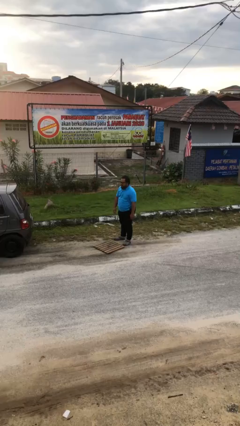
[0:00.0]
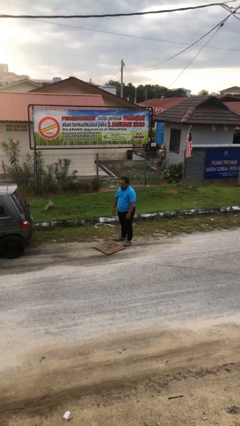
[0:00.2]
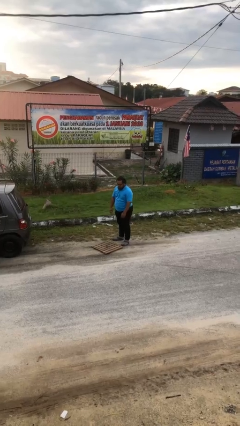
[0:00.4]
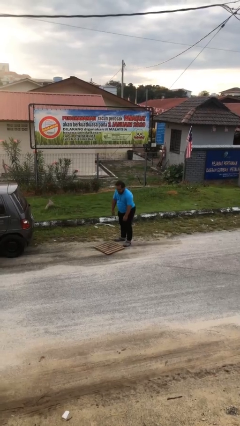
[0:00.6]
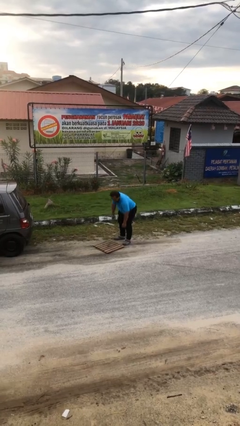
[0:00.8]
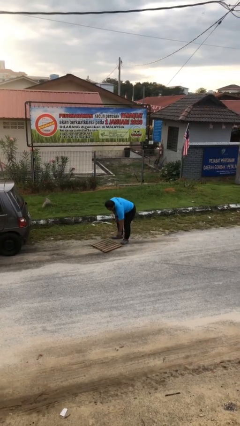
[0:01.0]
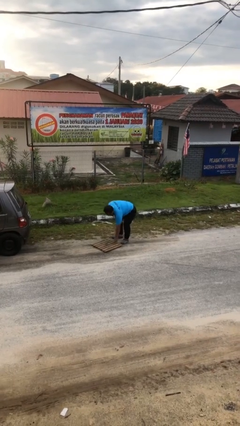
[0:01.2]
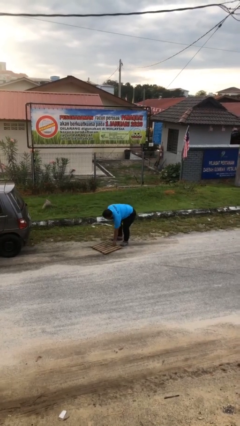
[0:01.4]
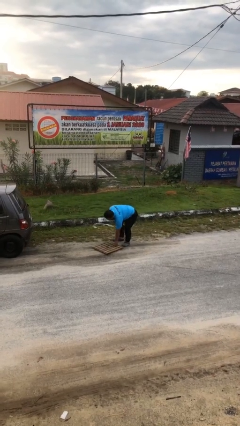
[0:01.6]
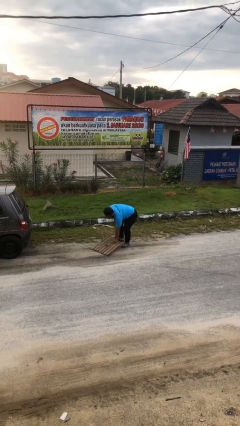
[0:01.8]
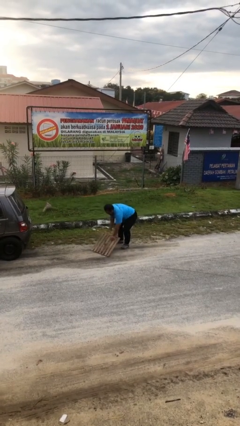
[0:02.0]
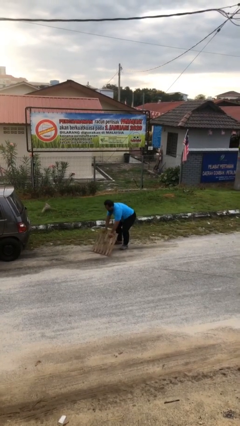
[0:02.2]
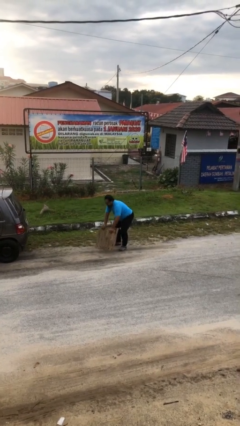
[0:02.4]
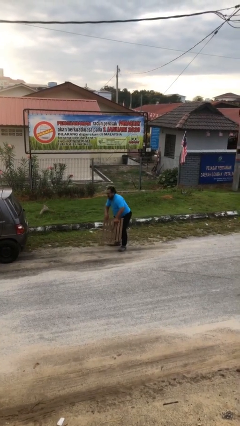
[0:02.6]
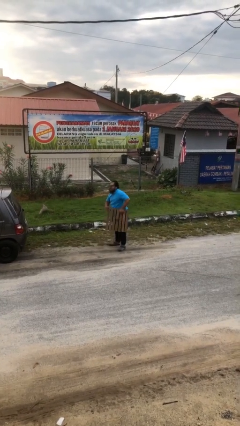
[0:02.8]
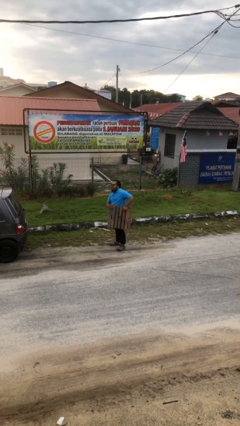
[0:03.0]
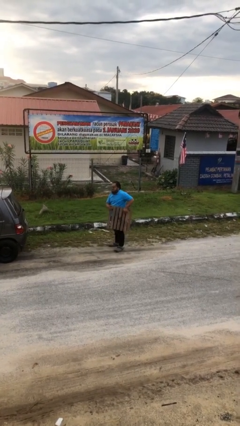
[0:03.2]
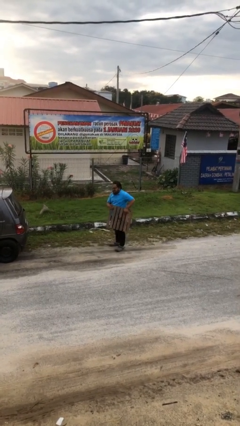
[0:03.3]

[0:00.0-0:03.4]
person picks up object from floor

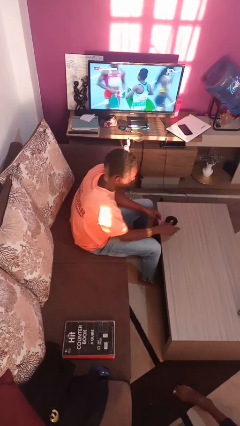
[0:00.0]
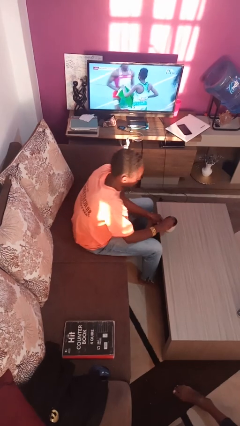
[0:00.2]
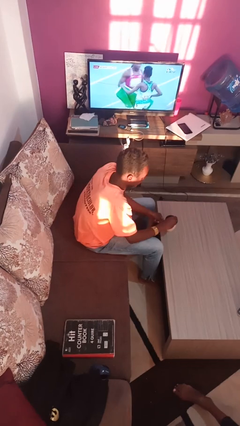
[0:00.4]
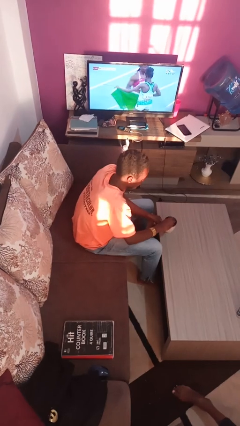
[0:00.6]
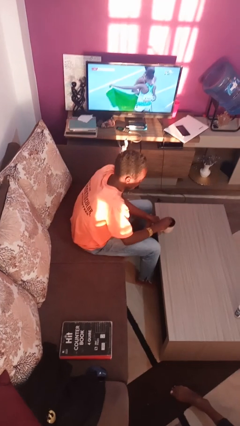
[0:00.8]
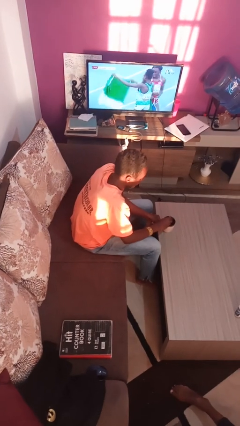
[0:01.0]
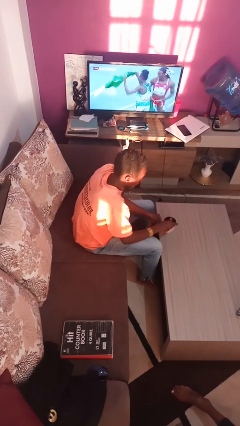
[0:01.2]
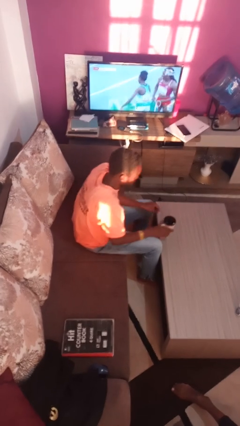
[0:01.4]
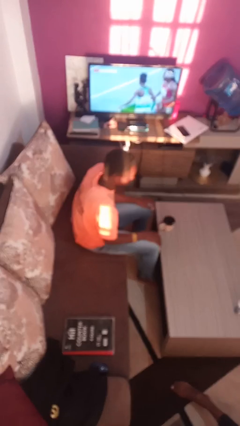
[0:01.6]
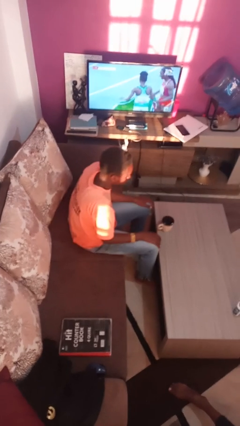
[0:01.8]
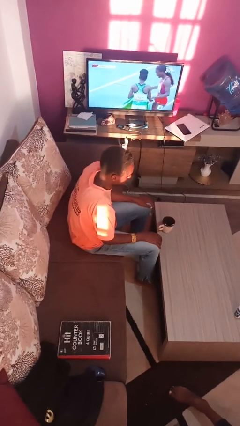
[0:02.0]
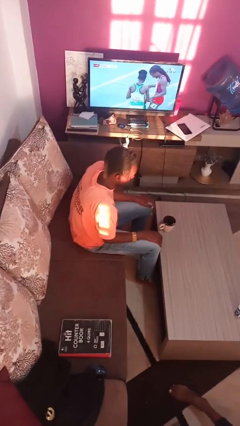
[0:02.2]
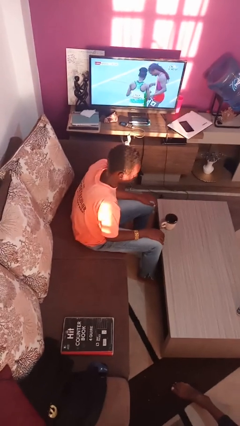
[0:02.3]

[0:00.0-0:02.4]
person stirs mug

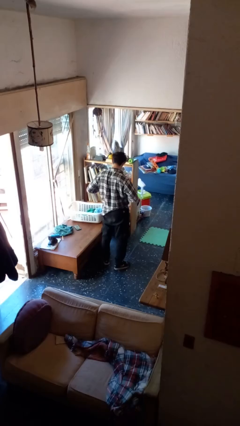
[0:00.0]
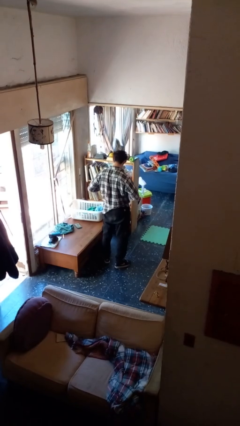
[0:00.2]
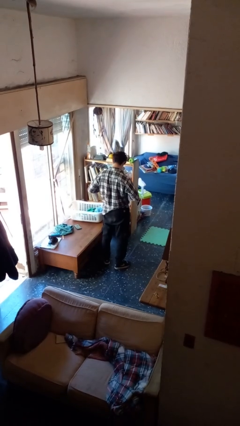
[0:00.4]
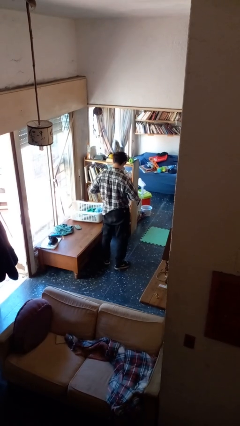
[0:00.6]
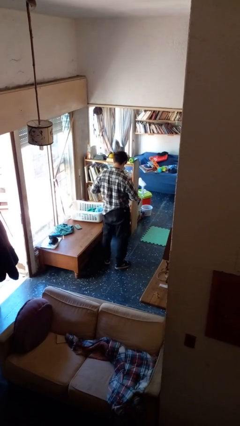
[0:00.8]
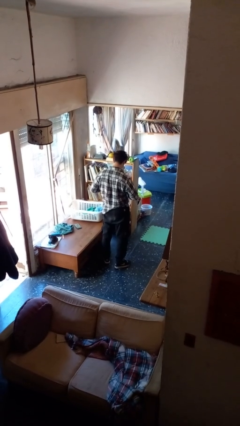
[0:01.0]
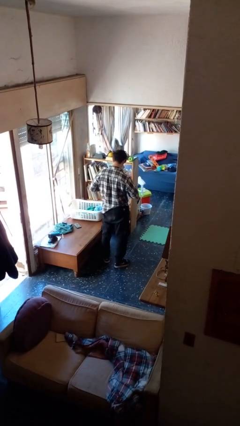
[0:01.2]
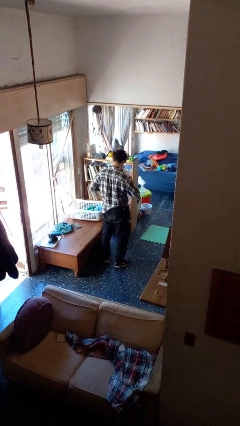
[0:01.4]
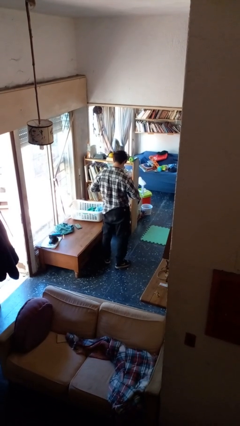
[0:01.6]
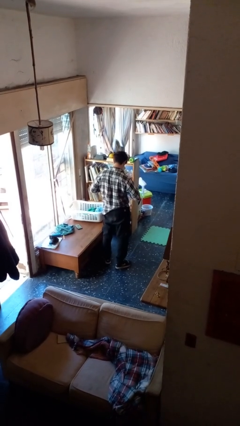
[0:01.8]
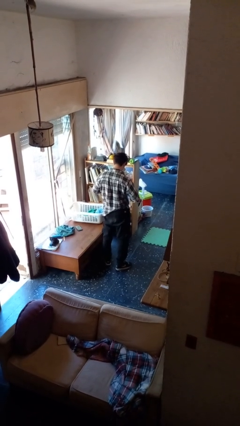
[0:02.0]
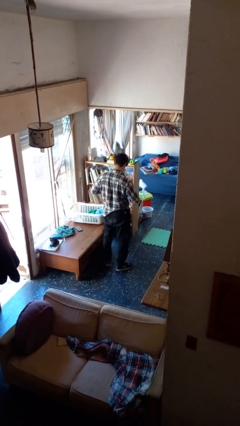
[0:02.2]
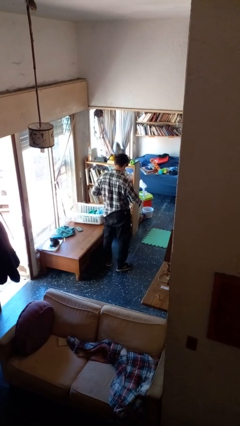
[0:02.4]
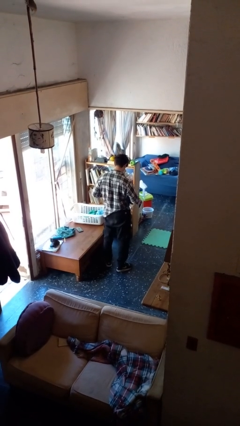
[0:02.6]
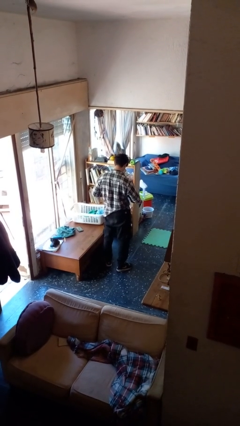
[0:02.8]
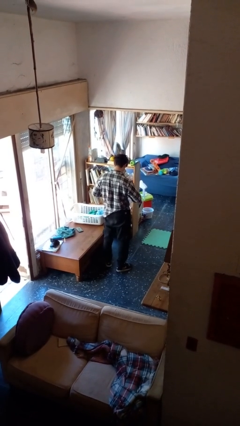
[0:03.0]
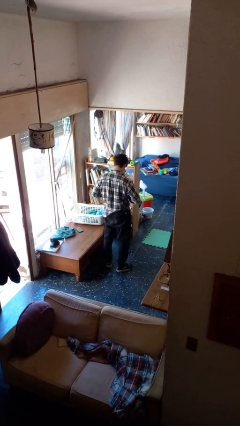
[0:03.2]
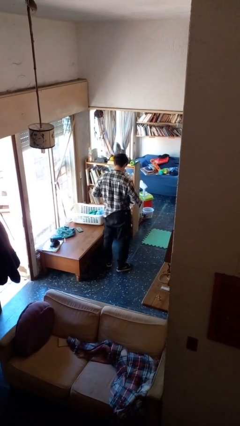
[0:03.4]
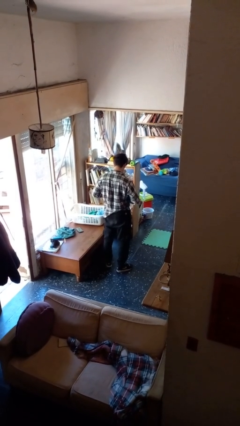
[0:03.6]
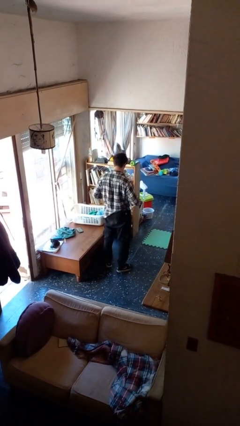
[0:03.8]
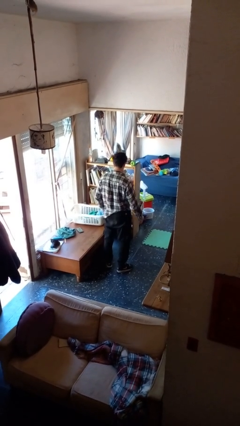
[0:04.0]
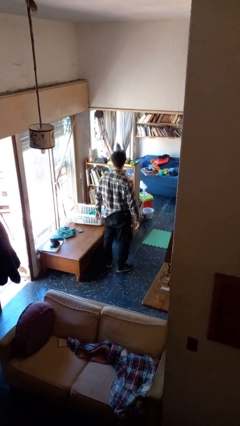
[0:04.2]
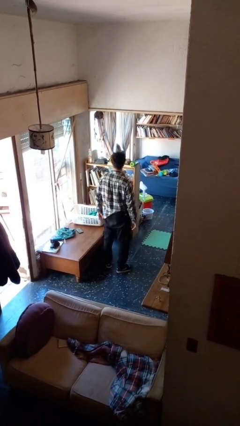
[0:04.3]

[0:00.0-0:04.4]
person buttons shirt

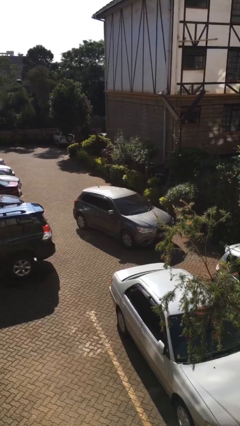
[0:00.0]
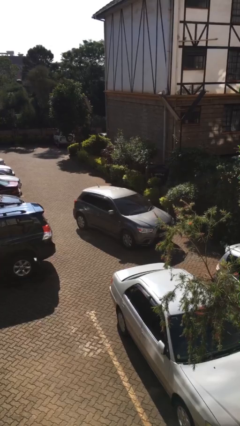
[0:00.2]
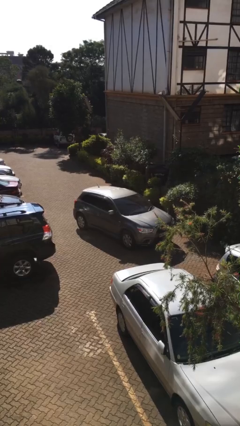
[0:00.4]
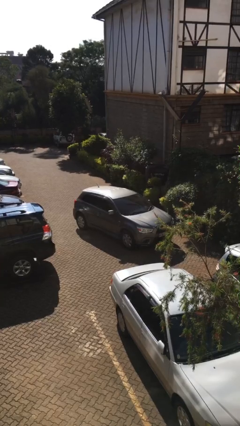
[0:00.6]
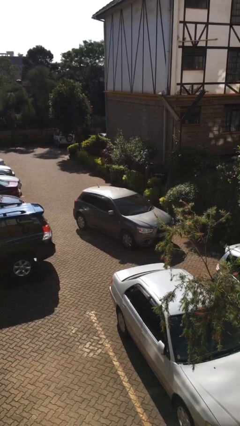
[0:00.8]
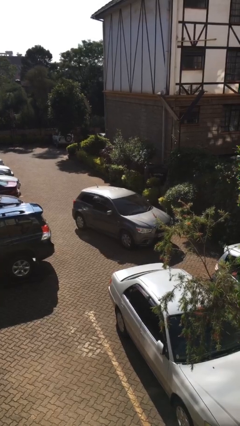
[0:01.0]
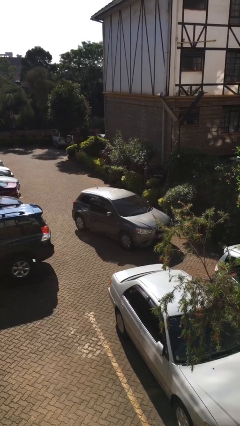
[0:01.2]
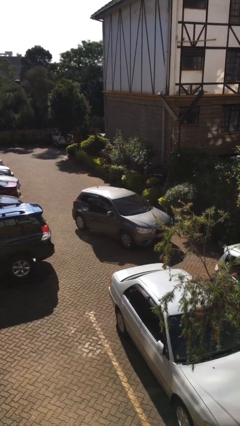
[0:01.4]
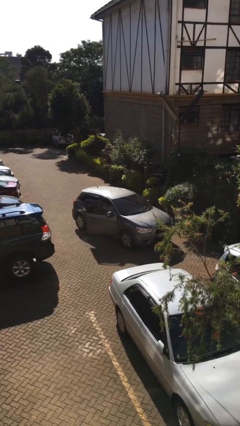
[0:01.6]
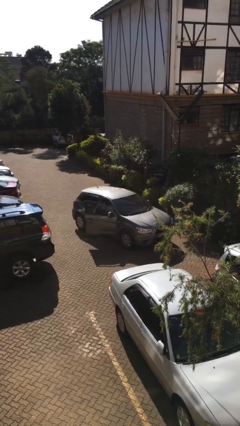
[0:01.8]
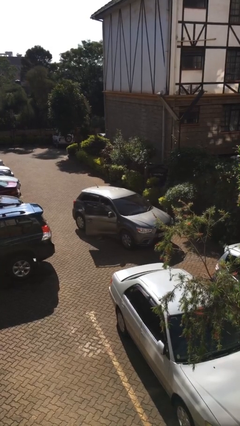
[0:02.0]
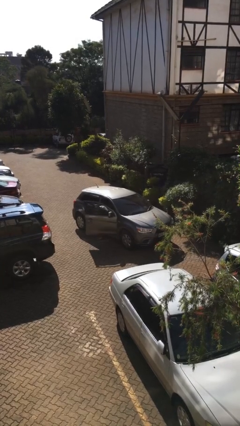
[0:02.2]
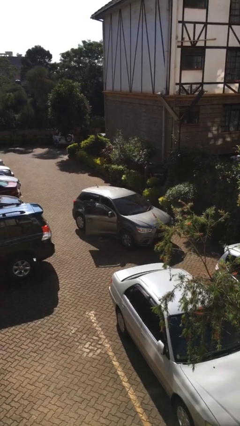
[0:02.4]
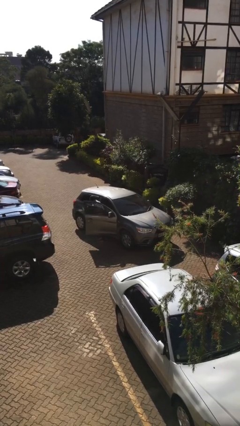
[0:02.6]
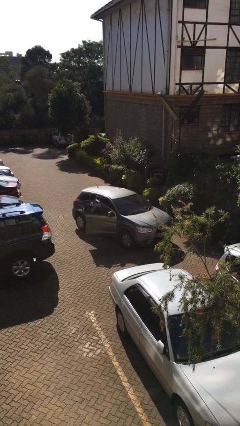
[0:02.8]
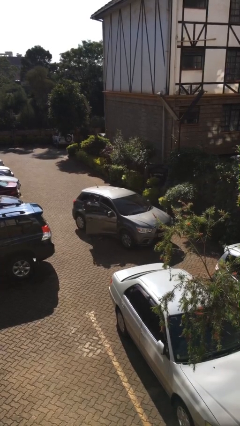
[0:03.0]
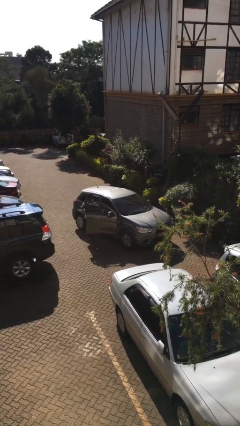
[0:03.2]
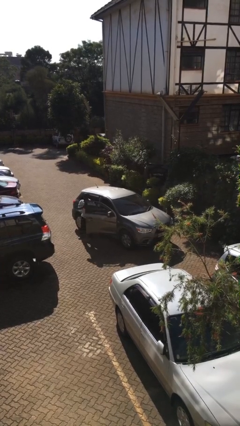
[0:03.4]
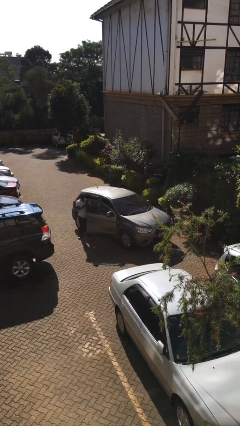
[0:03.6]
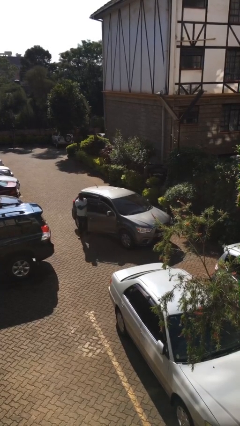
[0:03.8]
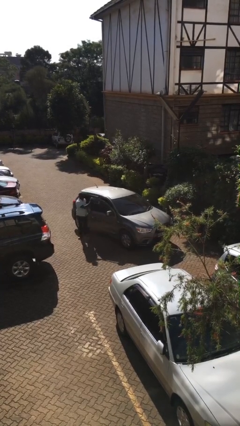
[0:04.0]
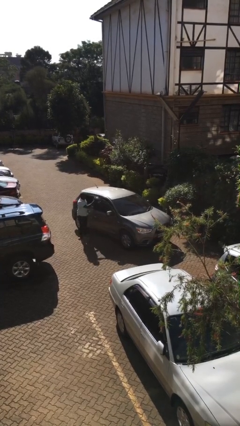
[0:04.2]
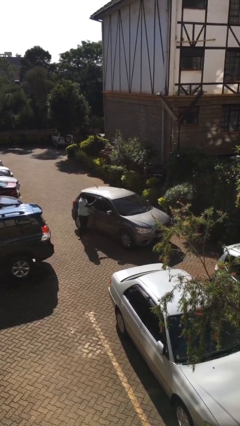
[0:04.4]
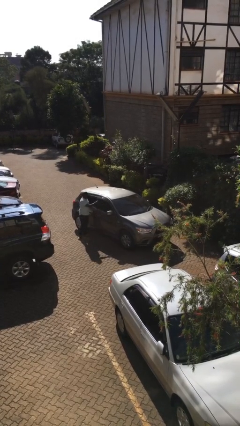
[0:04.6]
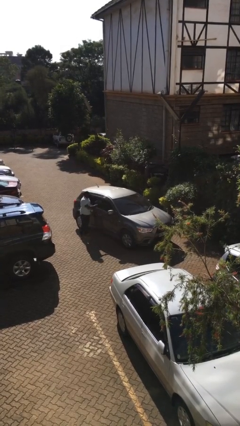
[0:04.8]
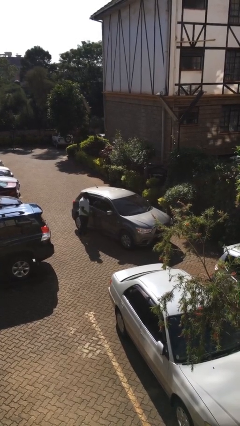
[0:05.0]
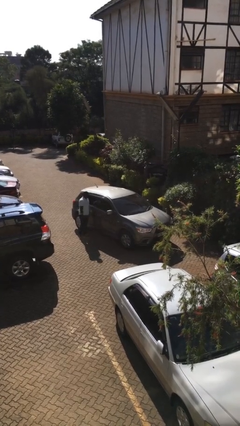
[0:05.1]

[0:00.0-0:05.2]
car drops off person

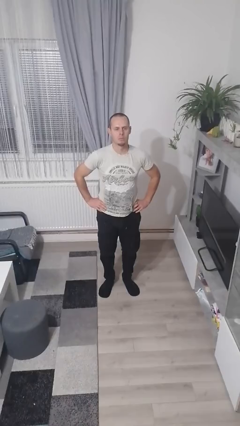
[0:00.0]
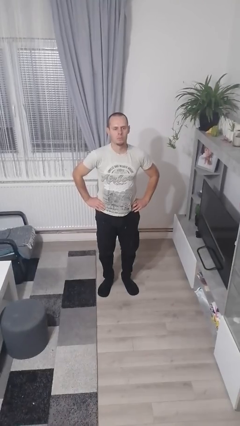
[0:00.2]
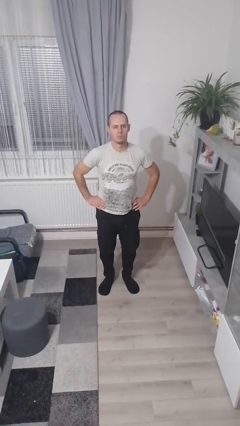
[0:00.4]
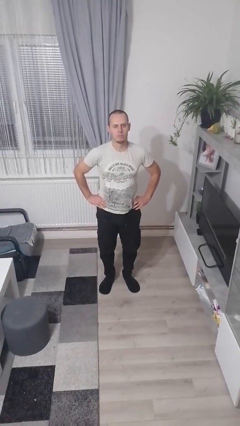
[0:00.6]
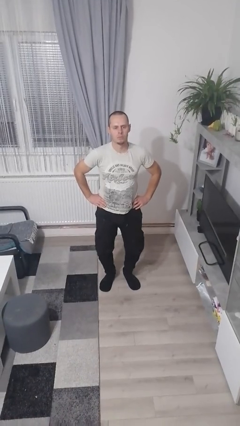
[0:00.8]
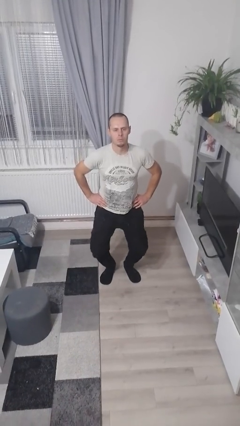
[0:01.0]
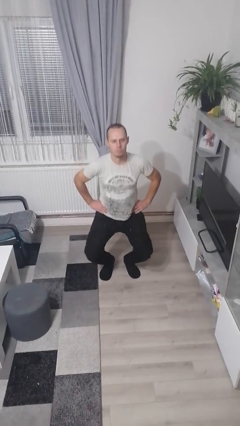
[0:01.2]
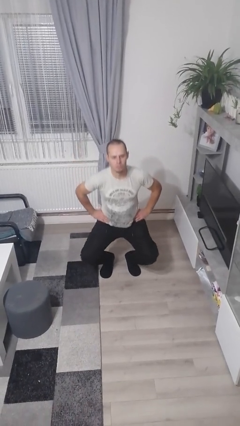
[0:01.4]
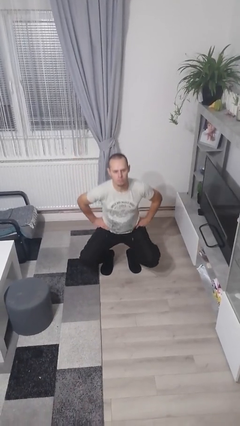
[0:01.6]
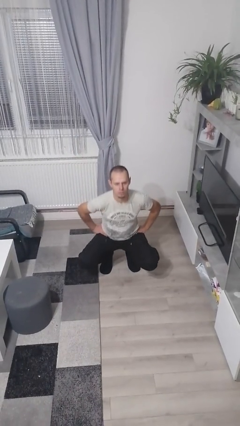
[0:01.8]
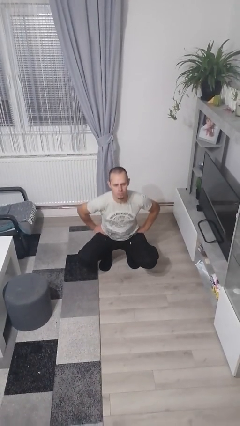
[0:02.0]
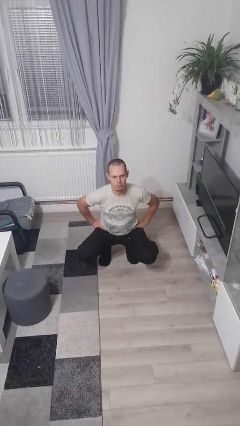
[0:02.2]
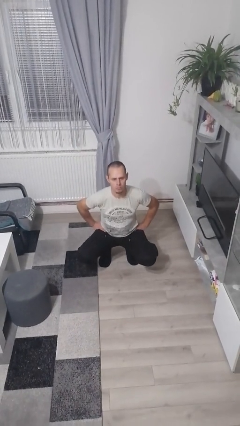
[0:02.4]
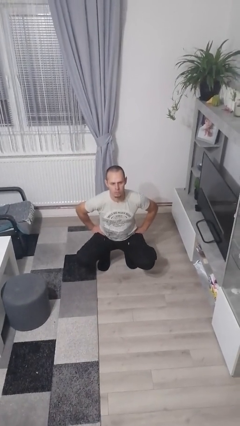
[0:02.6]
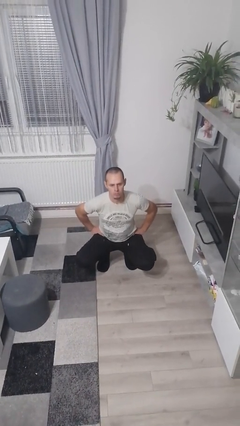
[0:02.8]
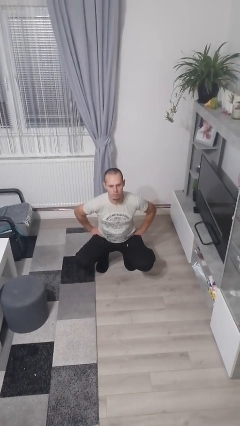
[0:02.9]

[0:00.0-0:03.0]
person squats
